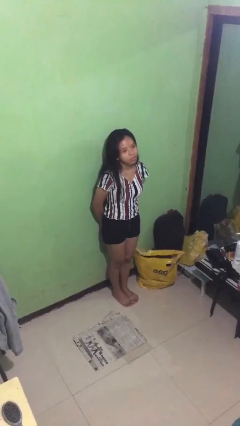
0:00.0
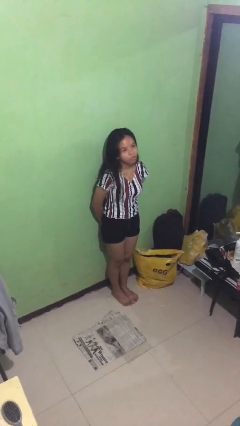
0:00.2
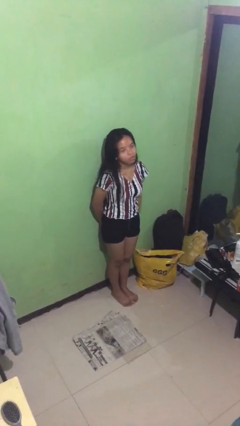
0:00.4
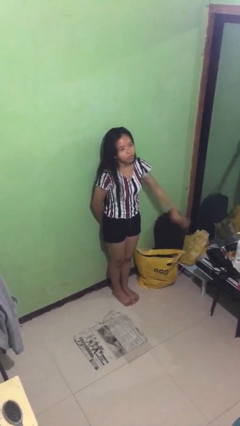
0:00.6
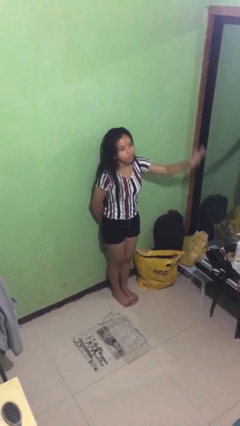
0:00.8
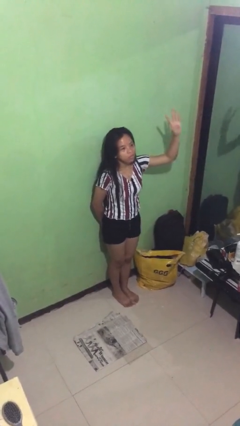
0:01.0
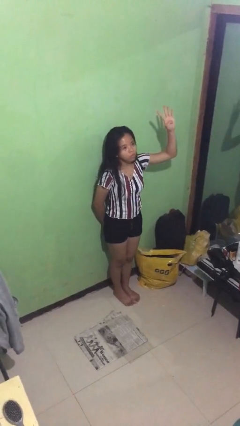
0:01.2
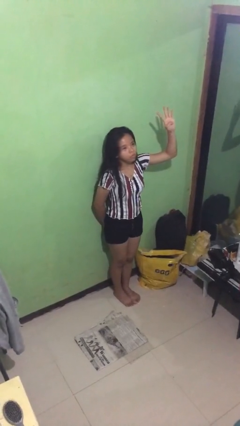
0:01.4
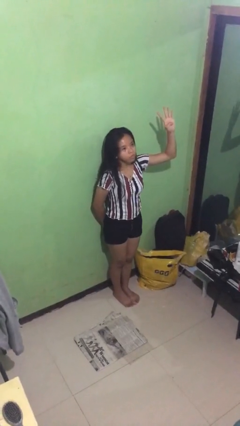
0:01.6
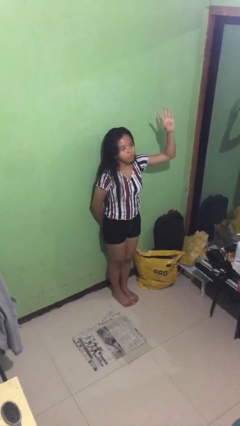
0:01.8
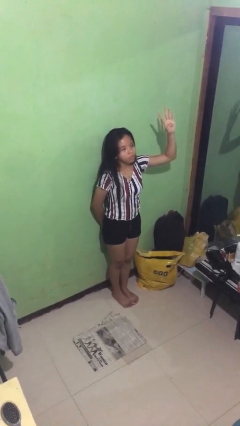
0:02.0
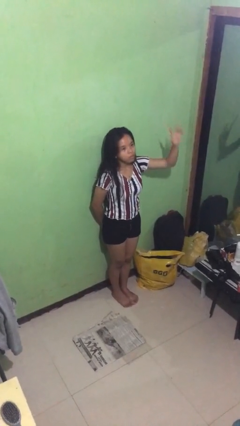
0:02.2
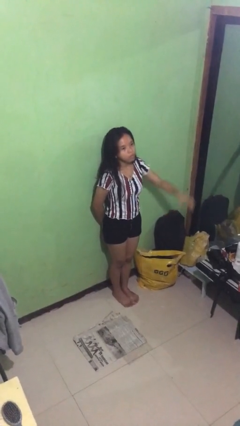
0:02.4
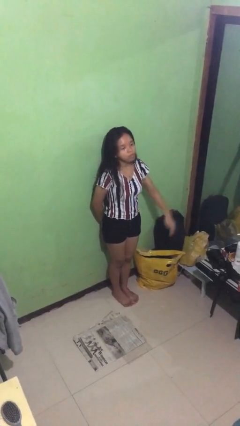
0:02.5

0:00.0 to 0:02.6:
person gestures number four

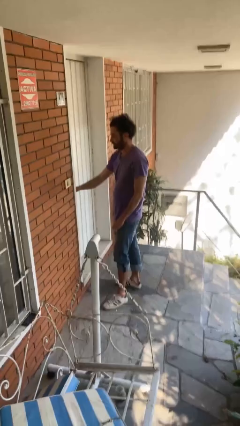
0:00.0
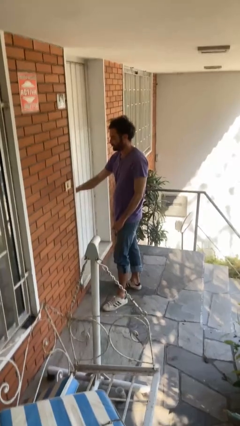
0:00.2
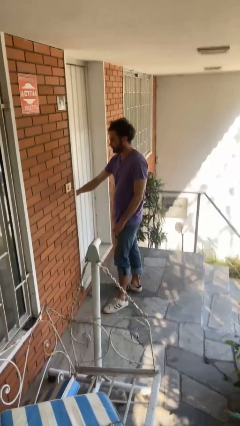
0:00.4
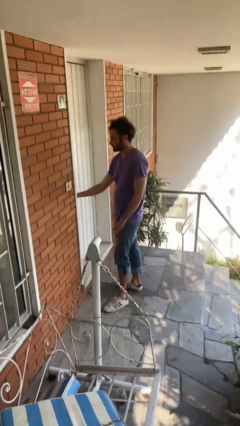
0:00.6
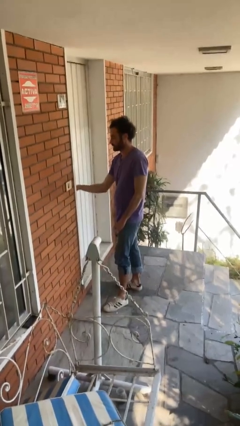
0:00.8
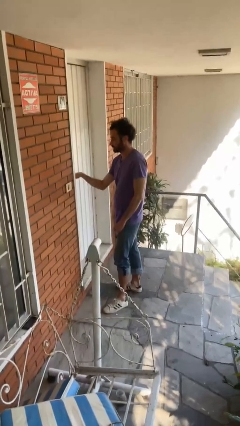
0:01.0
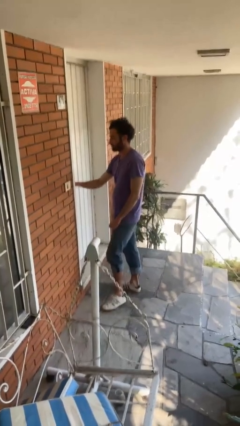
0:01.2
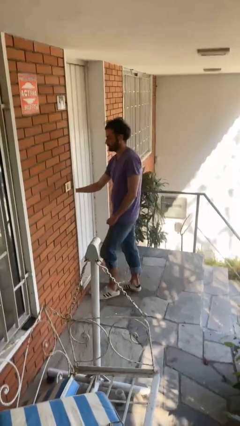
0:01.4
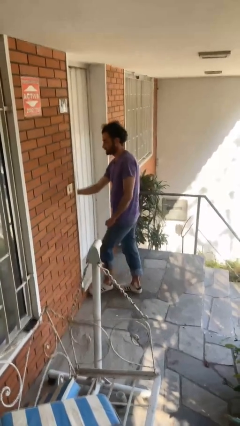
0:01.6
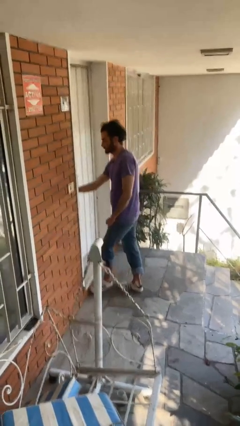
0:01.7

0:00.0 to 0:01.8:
person unlocks door with keys

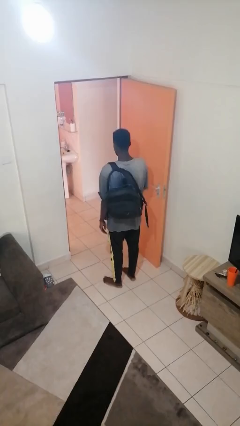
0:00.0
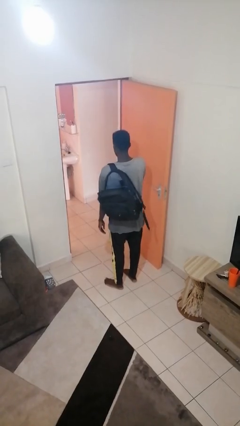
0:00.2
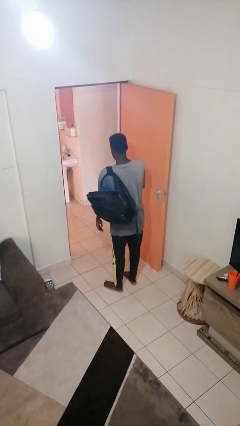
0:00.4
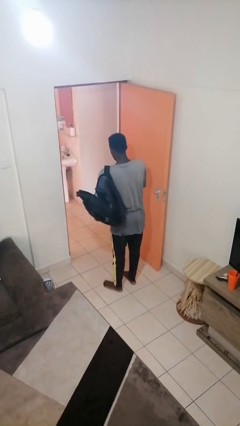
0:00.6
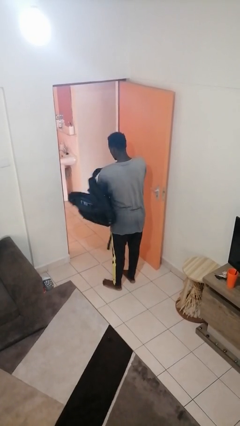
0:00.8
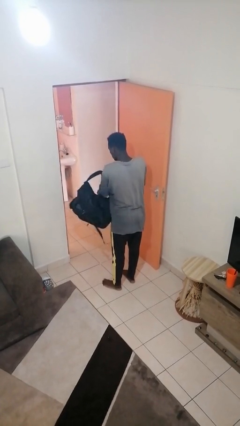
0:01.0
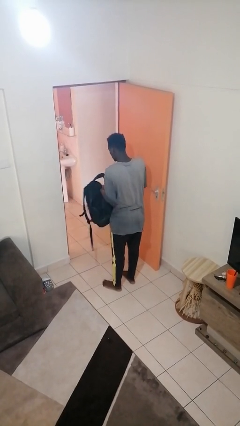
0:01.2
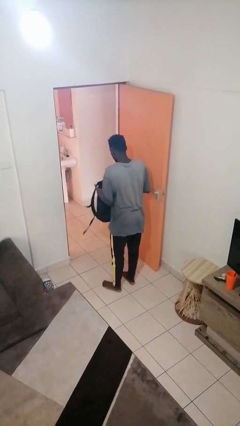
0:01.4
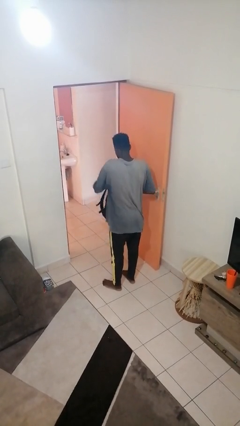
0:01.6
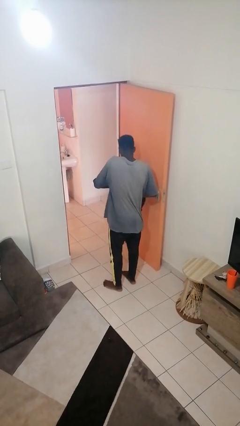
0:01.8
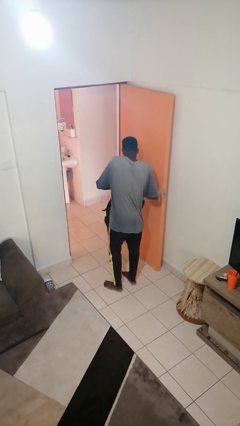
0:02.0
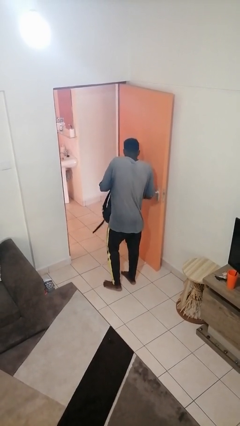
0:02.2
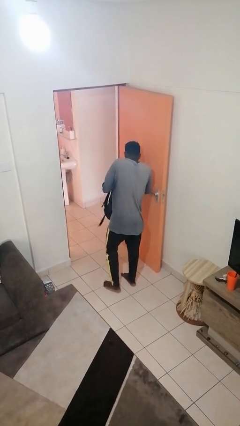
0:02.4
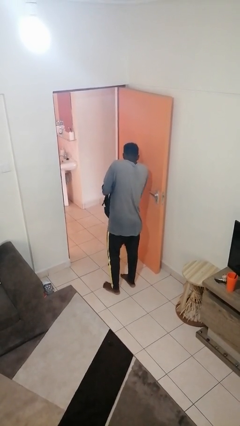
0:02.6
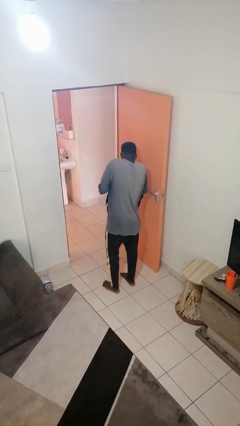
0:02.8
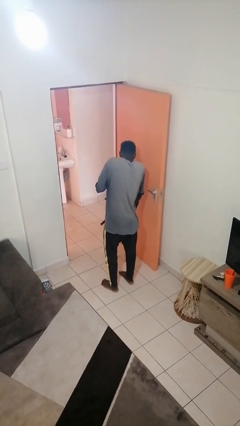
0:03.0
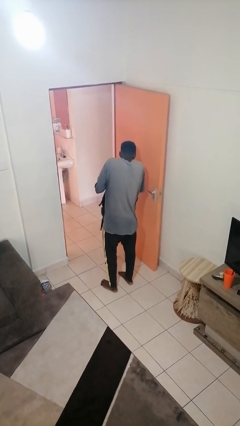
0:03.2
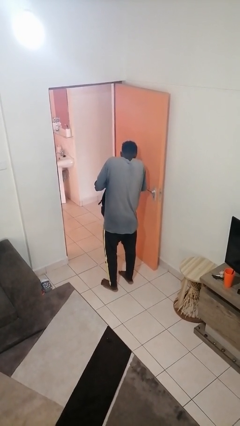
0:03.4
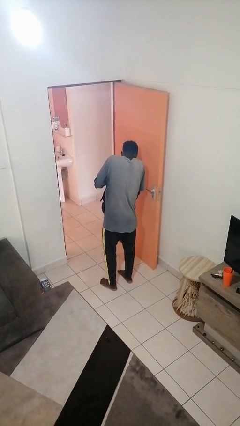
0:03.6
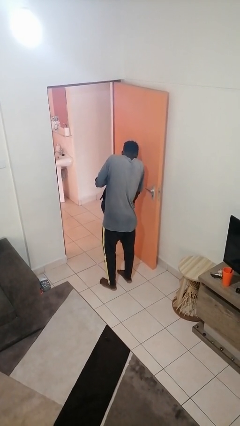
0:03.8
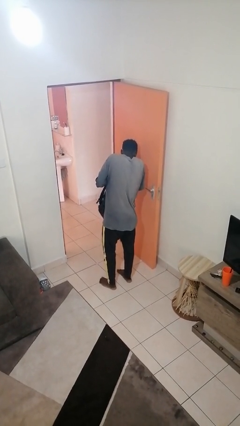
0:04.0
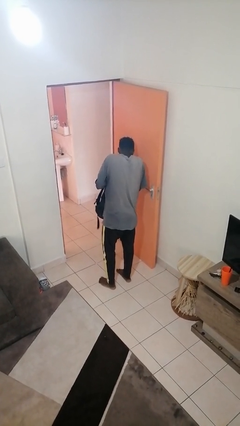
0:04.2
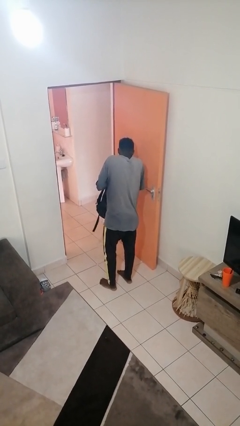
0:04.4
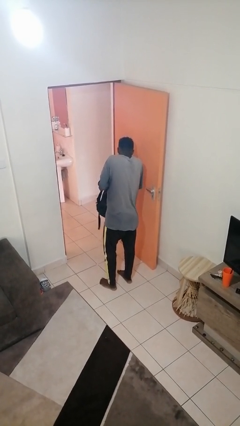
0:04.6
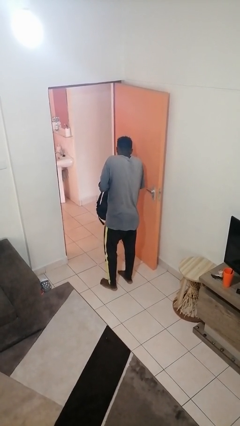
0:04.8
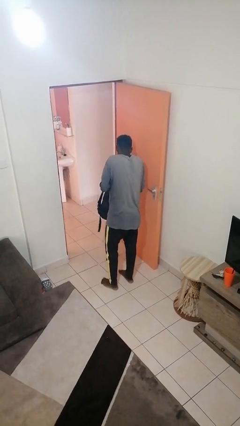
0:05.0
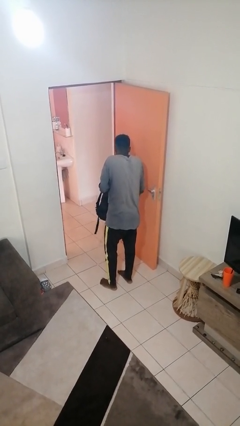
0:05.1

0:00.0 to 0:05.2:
person searches in backpack

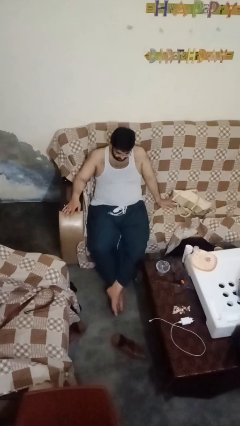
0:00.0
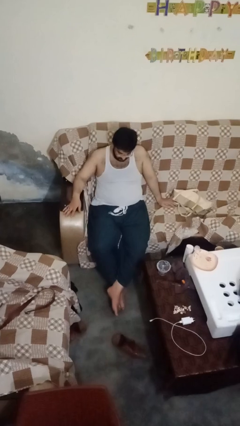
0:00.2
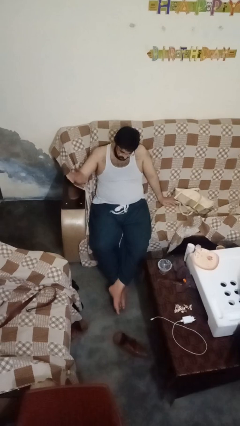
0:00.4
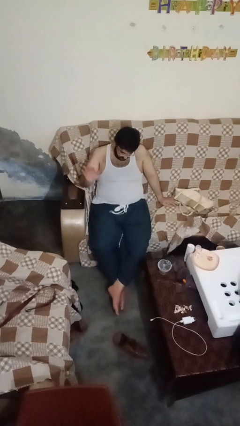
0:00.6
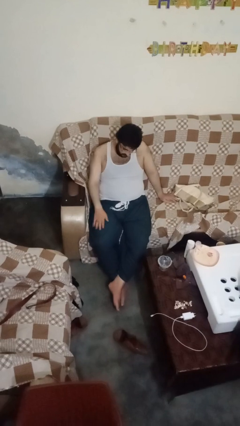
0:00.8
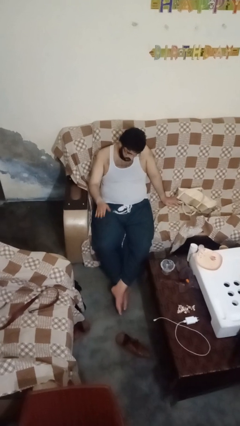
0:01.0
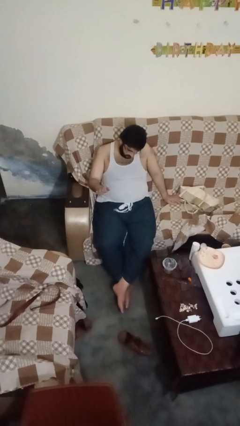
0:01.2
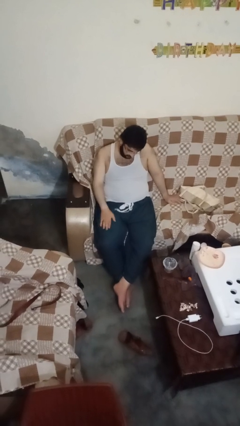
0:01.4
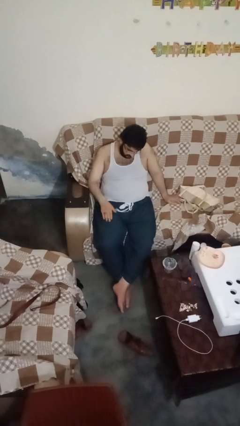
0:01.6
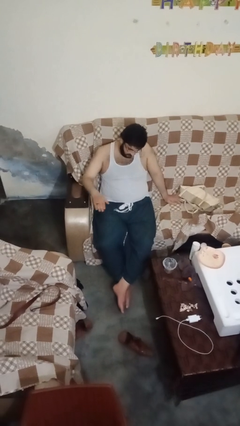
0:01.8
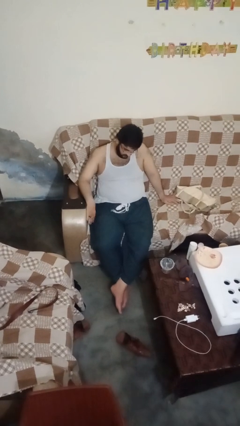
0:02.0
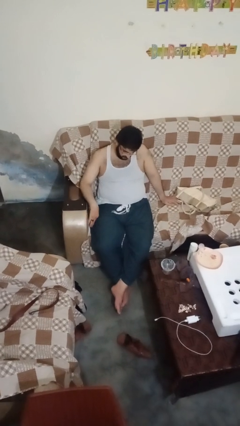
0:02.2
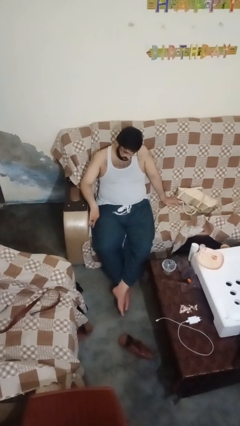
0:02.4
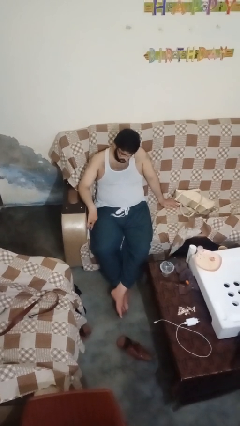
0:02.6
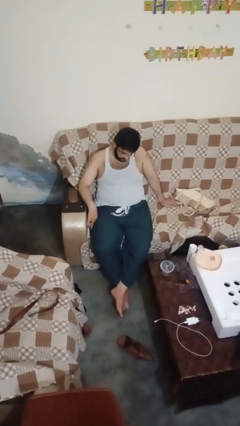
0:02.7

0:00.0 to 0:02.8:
person slaps hands on thighs

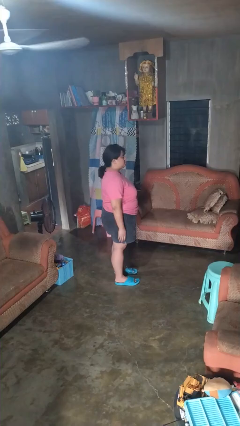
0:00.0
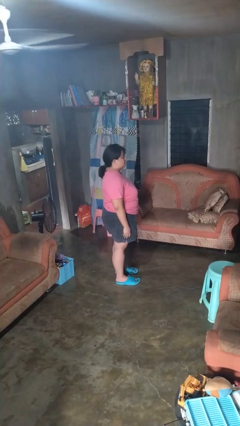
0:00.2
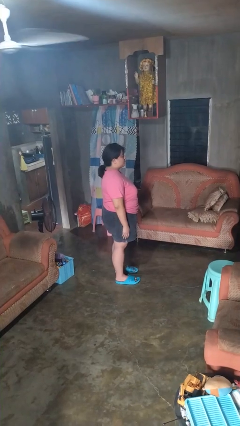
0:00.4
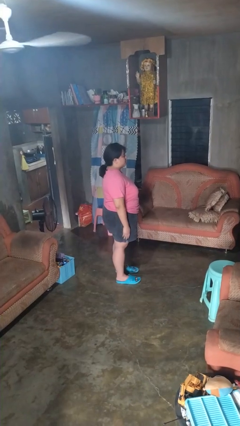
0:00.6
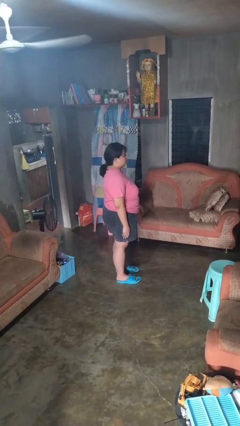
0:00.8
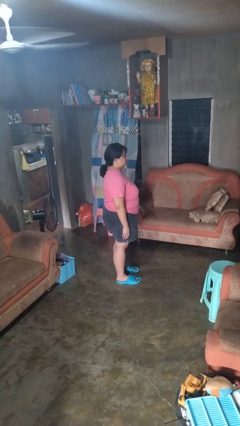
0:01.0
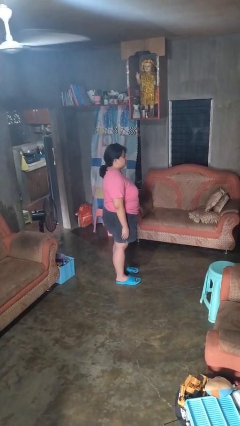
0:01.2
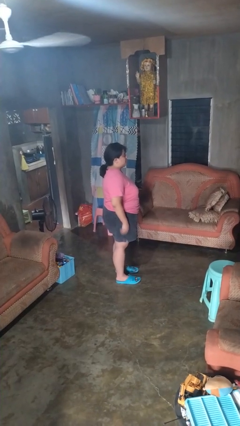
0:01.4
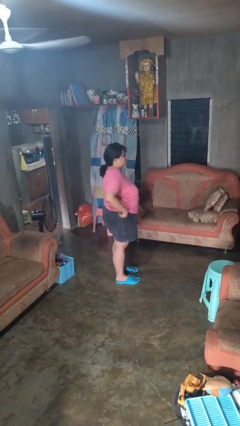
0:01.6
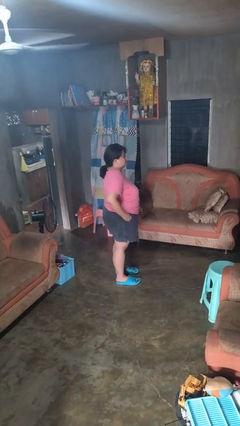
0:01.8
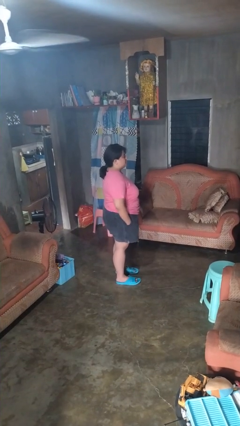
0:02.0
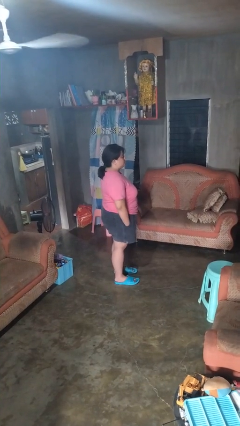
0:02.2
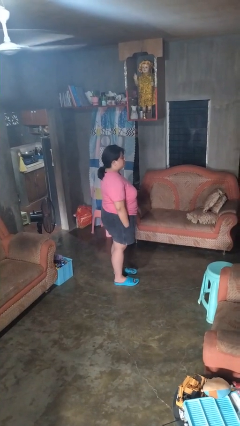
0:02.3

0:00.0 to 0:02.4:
person puts hands in back pockets

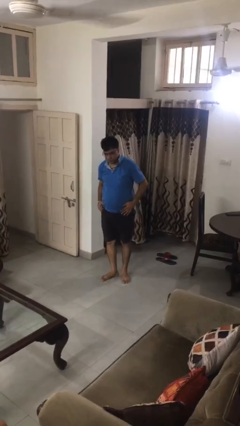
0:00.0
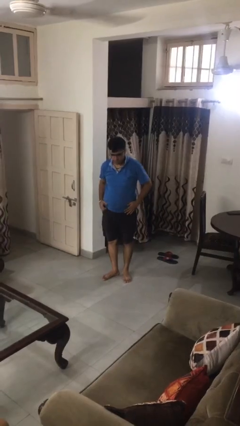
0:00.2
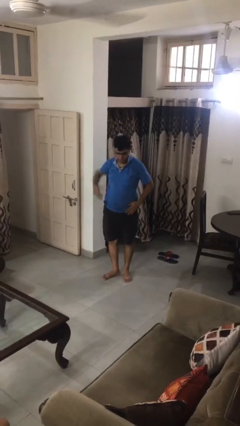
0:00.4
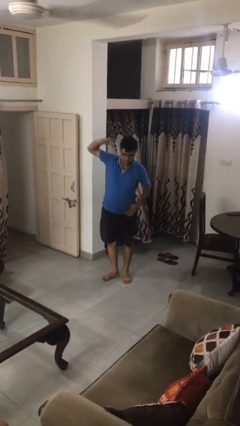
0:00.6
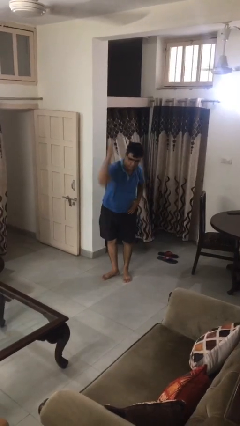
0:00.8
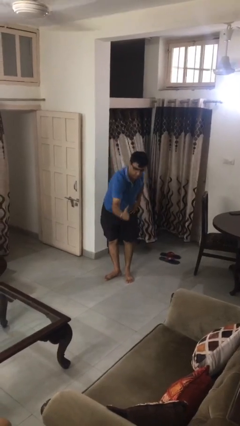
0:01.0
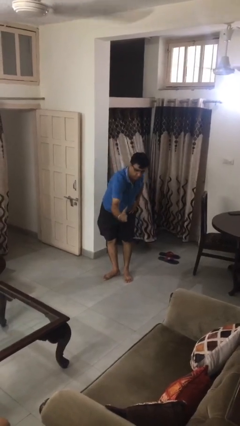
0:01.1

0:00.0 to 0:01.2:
person karate chop

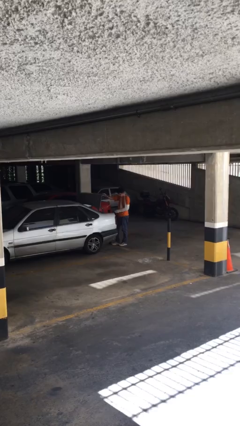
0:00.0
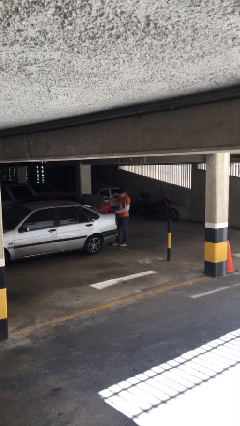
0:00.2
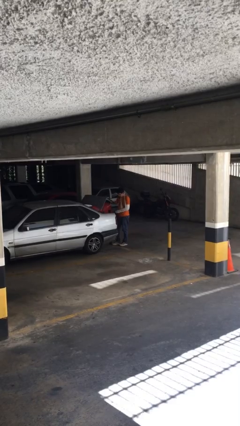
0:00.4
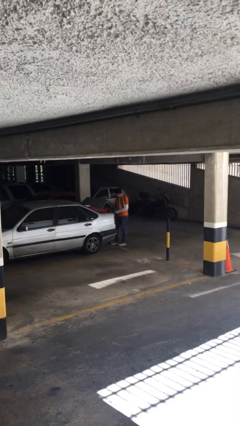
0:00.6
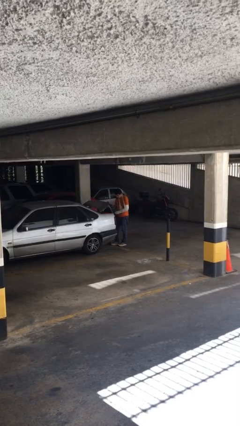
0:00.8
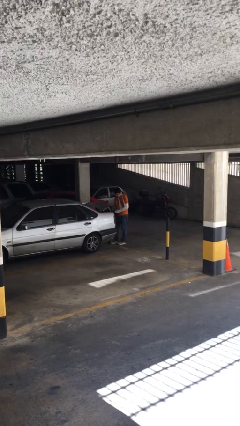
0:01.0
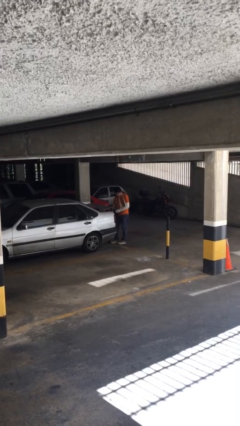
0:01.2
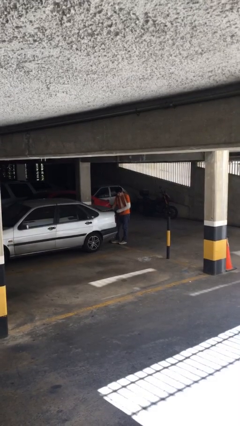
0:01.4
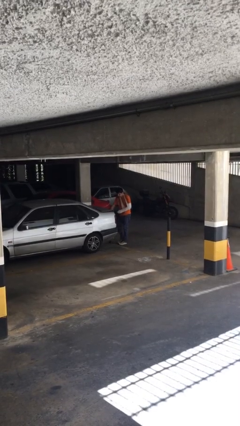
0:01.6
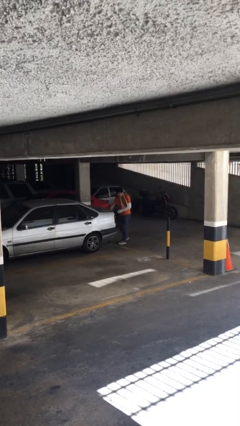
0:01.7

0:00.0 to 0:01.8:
person closes car trunk
